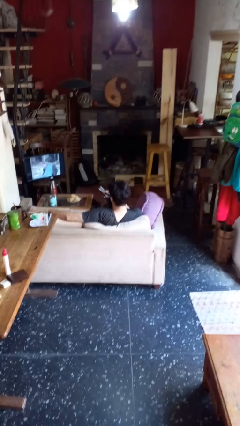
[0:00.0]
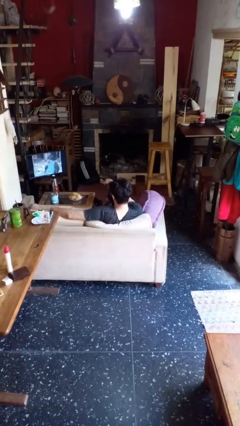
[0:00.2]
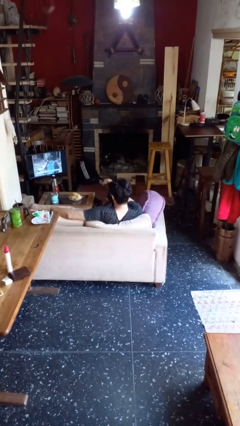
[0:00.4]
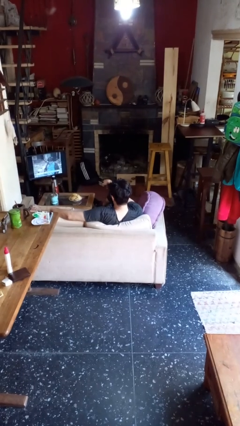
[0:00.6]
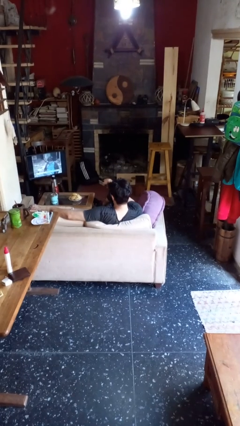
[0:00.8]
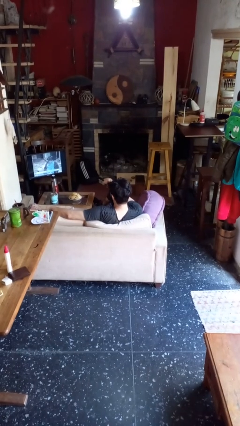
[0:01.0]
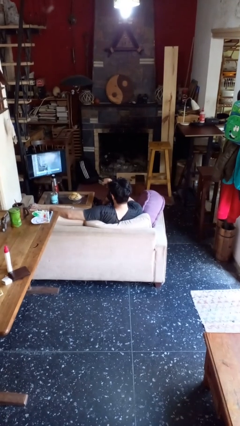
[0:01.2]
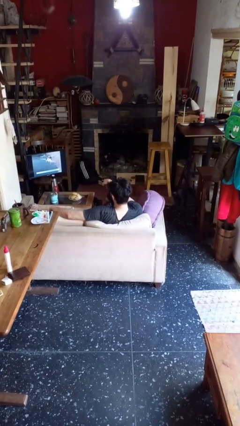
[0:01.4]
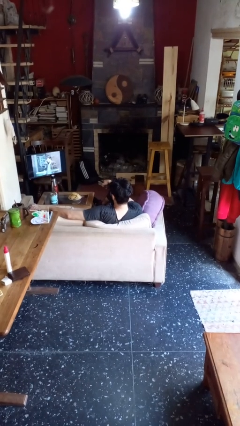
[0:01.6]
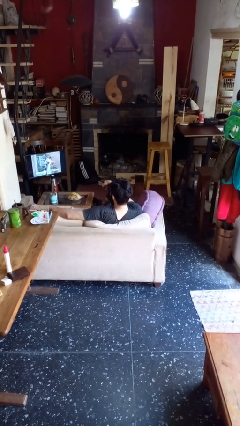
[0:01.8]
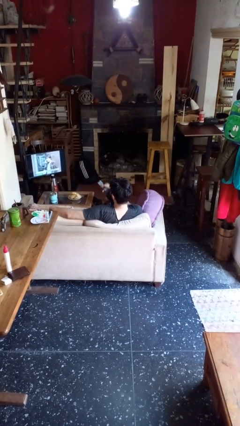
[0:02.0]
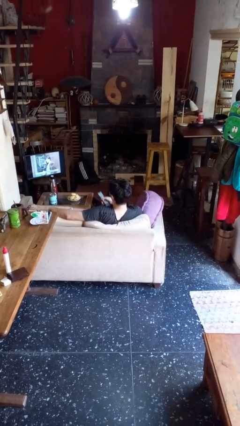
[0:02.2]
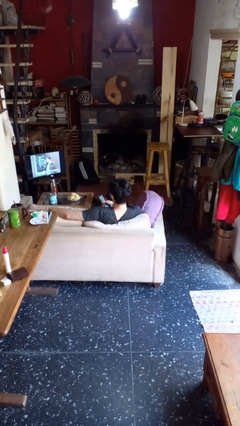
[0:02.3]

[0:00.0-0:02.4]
person uses television remote

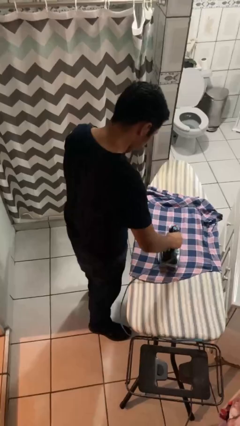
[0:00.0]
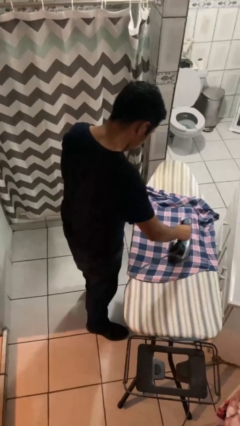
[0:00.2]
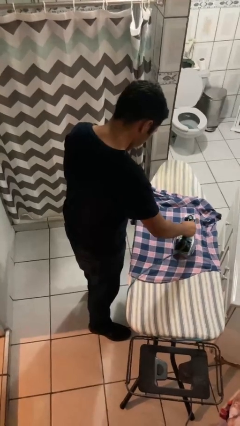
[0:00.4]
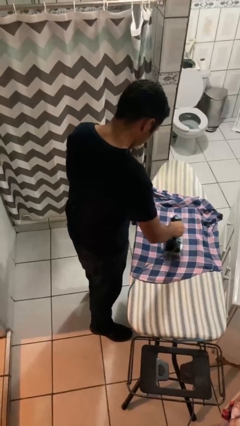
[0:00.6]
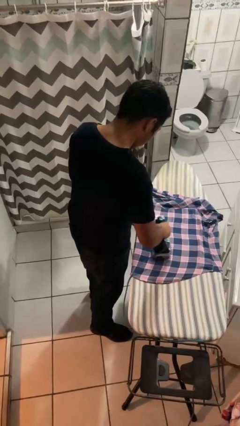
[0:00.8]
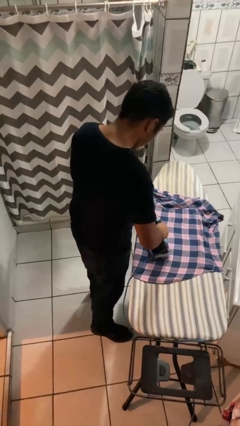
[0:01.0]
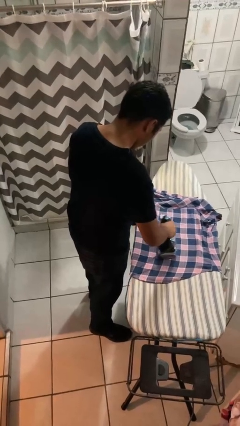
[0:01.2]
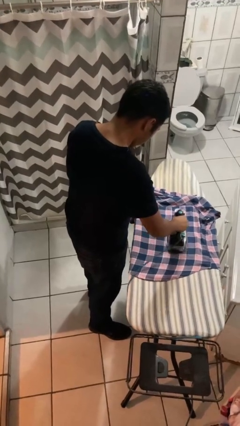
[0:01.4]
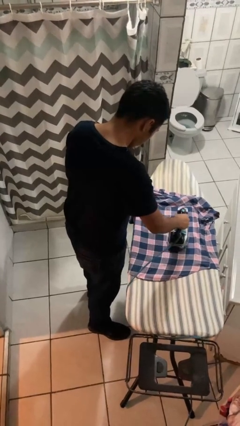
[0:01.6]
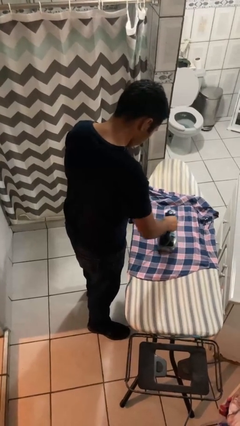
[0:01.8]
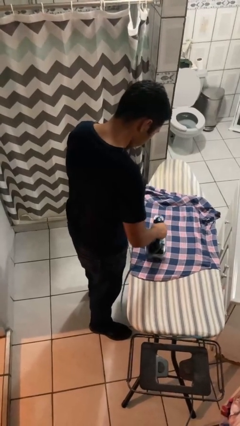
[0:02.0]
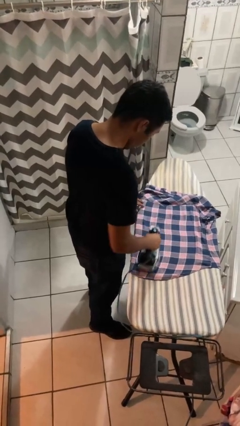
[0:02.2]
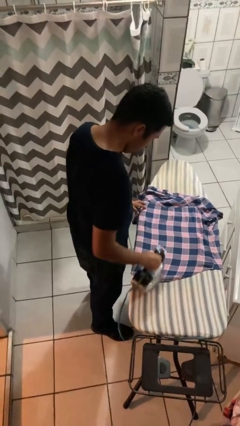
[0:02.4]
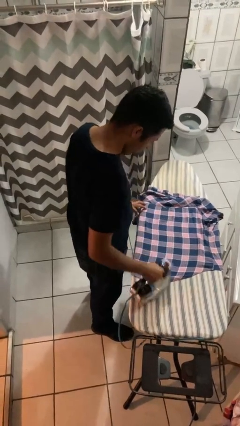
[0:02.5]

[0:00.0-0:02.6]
person irons clothes

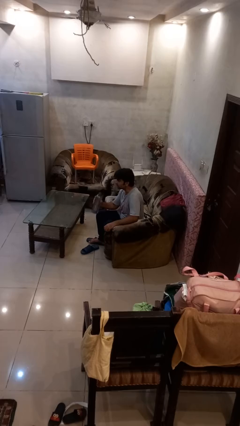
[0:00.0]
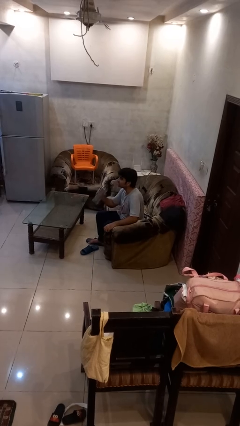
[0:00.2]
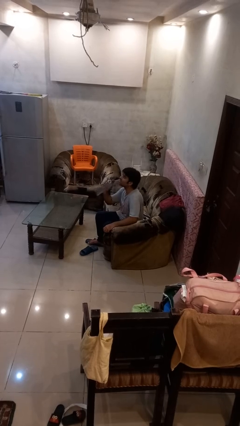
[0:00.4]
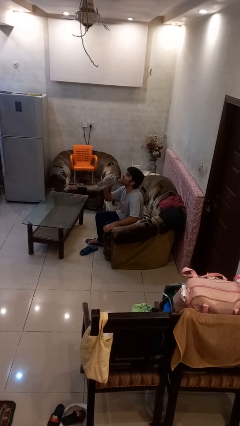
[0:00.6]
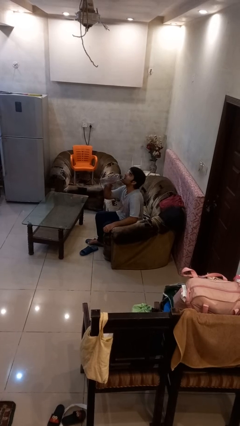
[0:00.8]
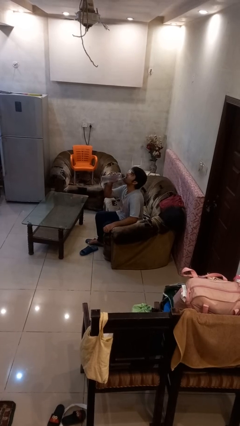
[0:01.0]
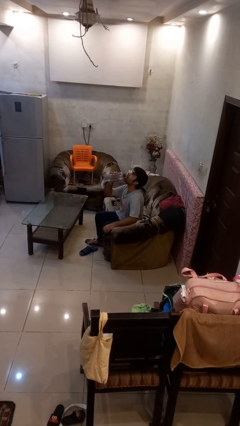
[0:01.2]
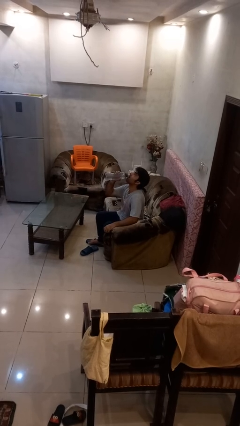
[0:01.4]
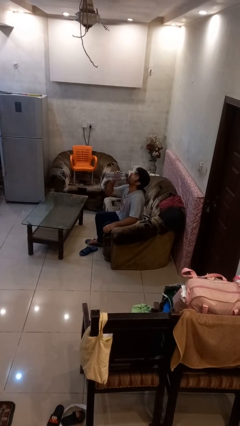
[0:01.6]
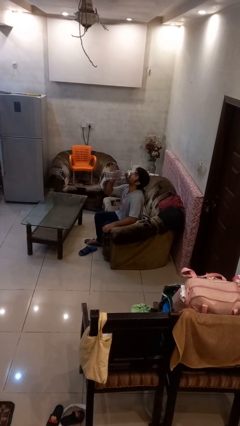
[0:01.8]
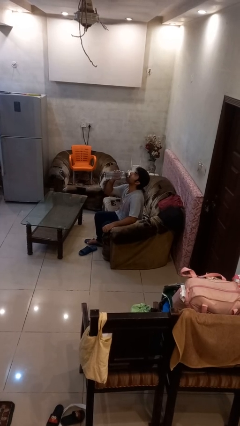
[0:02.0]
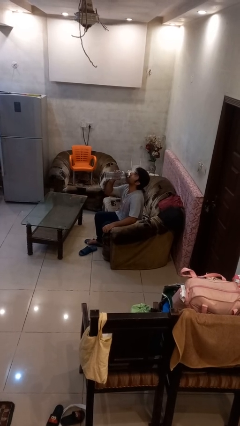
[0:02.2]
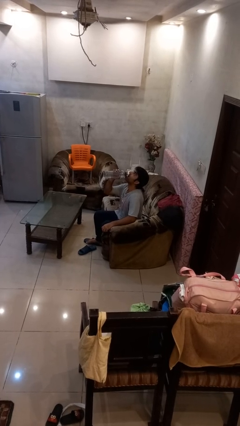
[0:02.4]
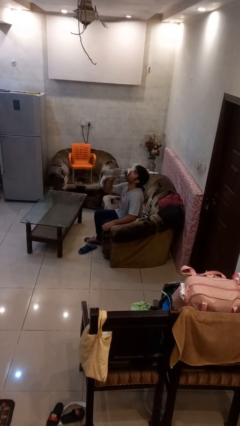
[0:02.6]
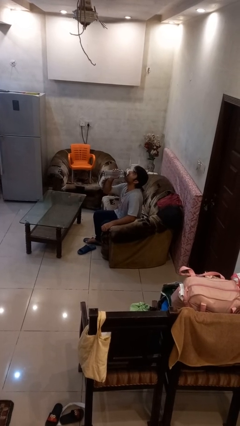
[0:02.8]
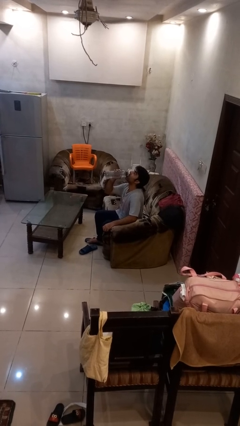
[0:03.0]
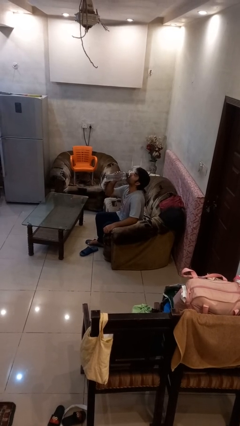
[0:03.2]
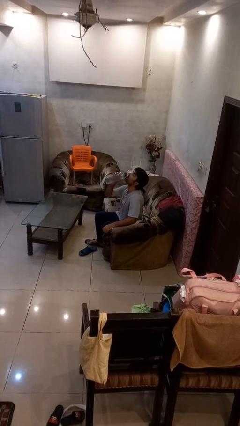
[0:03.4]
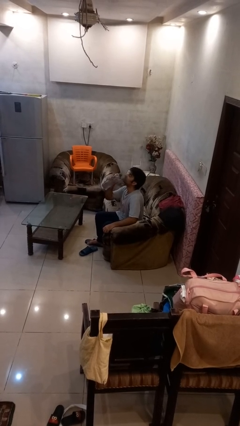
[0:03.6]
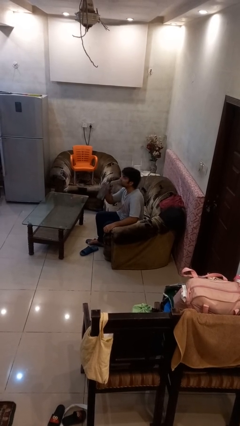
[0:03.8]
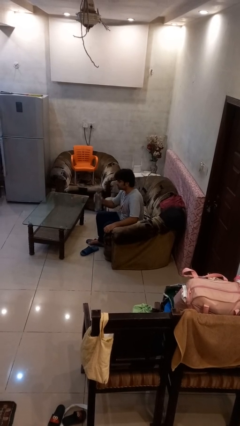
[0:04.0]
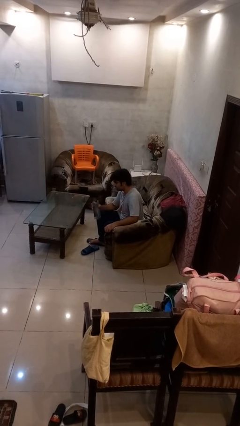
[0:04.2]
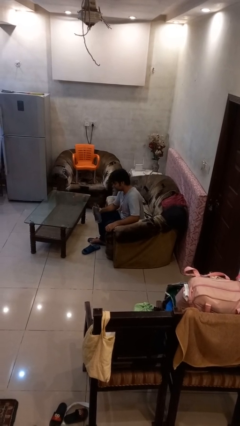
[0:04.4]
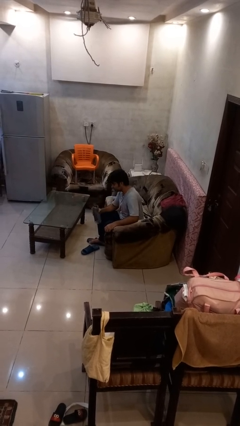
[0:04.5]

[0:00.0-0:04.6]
person drinks from bottle

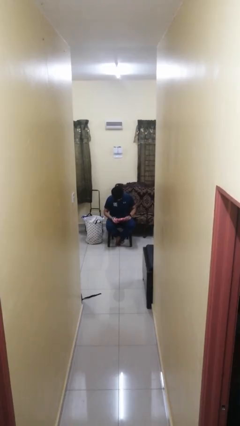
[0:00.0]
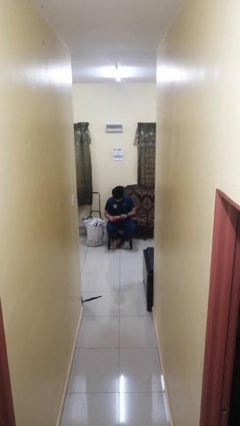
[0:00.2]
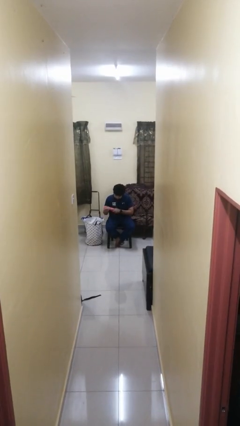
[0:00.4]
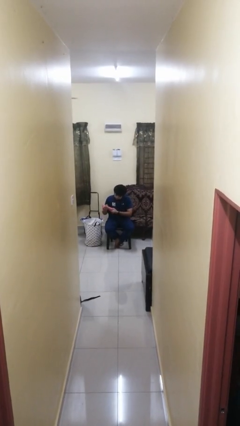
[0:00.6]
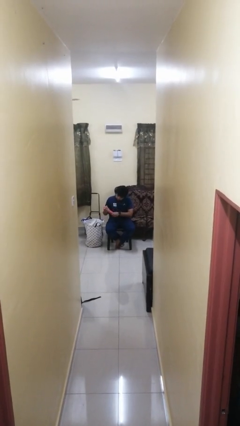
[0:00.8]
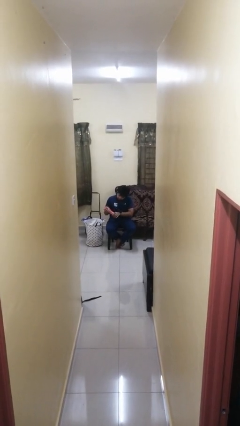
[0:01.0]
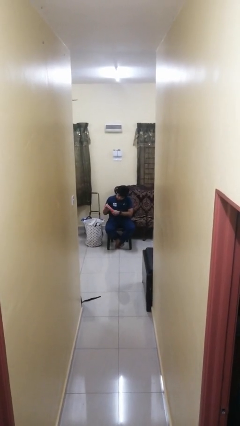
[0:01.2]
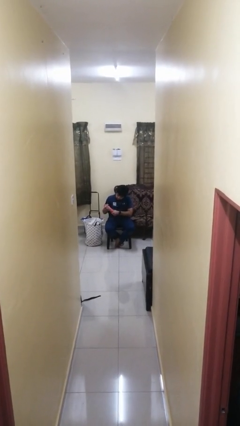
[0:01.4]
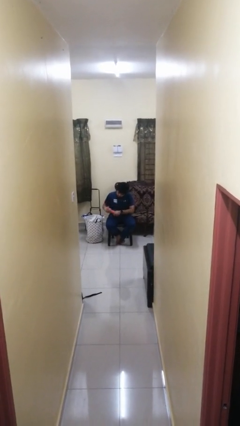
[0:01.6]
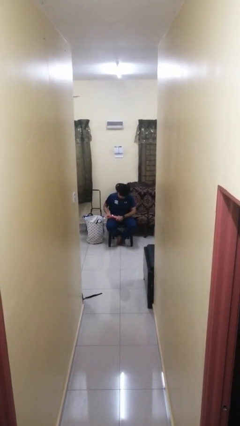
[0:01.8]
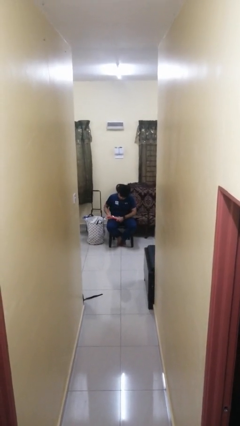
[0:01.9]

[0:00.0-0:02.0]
person squeezes object

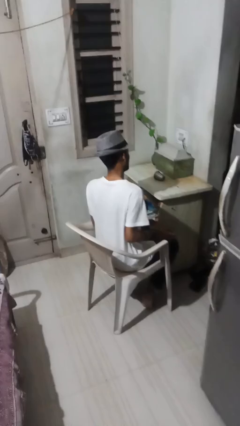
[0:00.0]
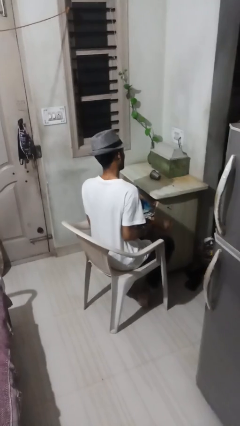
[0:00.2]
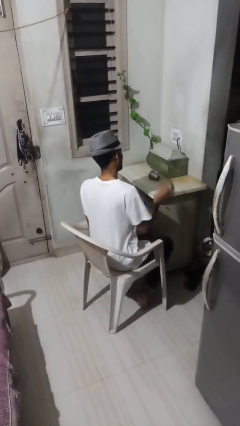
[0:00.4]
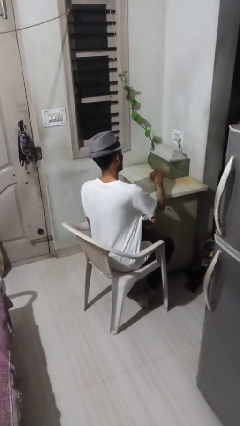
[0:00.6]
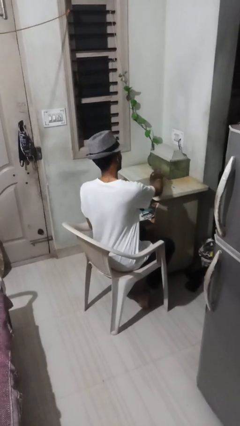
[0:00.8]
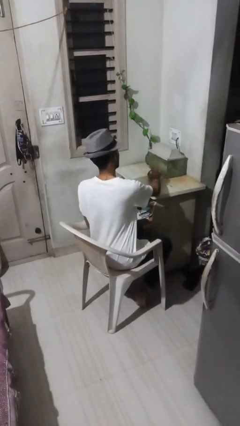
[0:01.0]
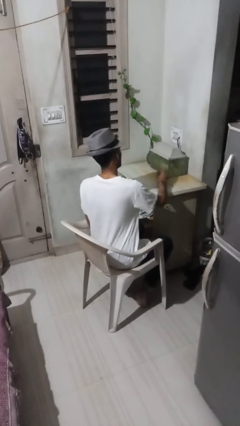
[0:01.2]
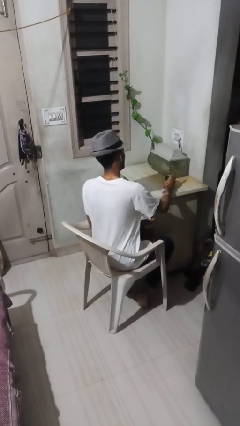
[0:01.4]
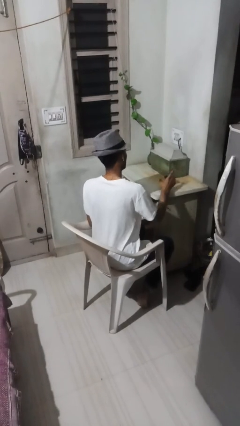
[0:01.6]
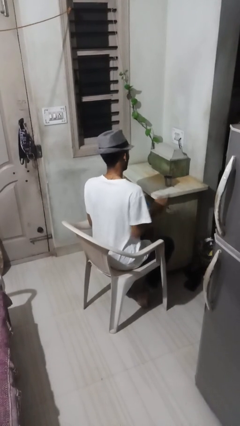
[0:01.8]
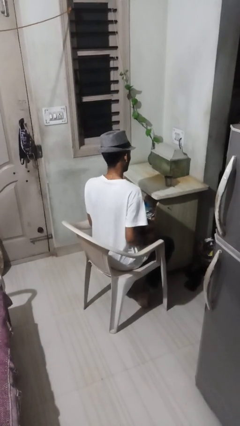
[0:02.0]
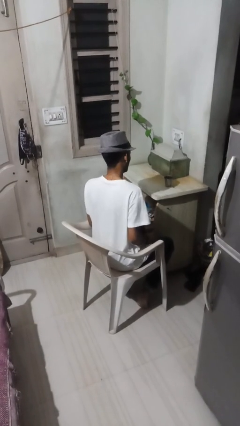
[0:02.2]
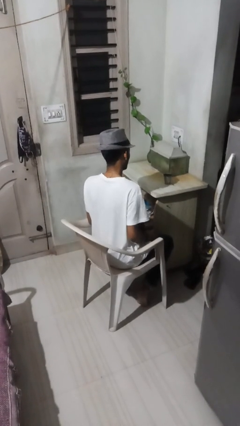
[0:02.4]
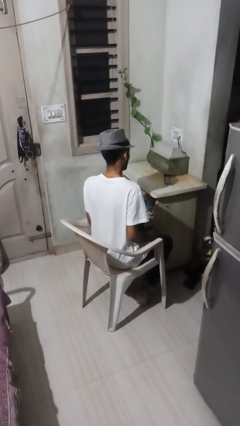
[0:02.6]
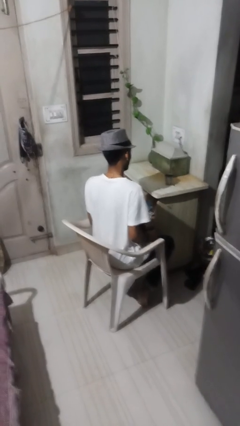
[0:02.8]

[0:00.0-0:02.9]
person sets upright glass

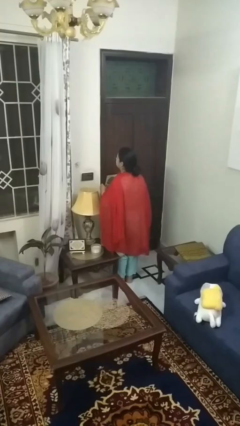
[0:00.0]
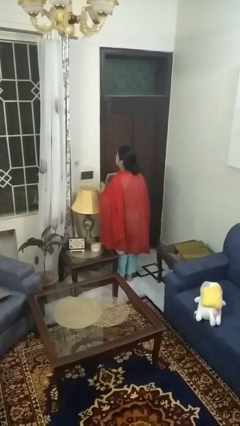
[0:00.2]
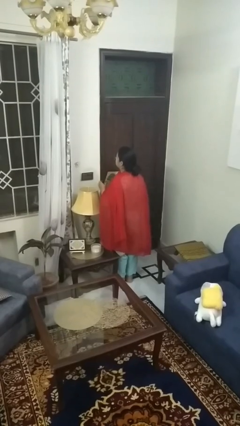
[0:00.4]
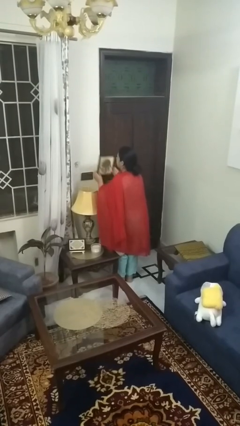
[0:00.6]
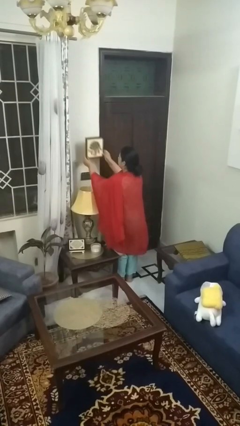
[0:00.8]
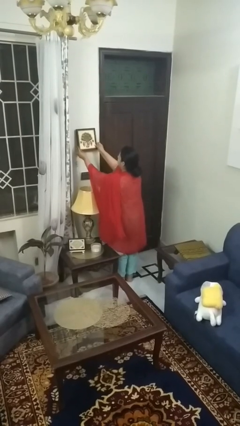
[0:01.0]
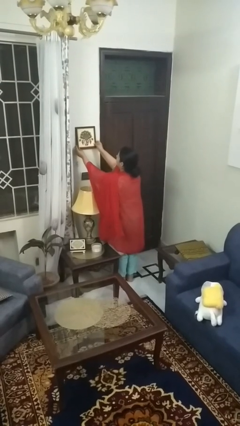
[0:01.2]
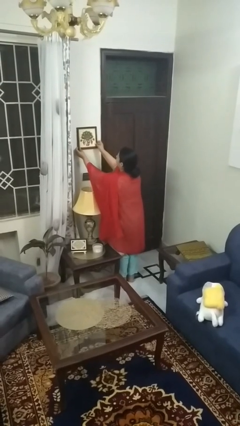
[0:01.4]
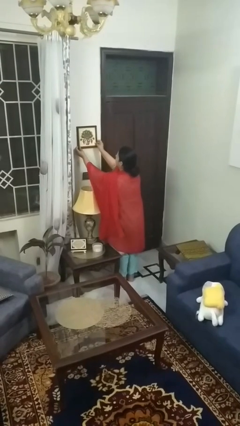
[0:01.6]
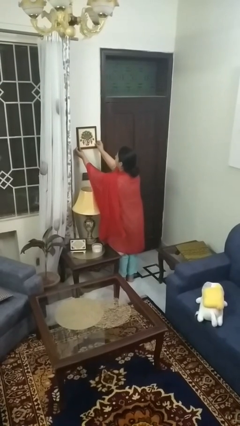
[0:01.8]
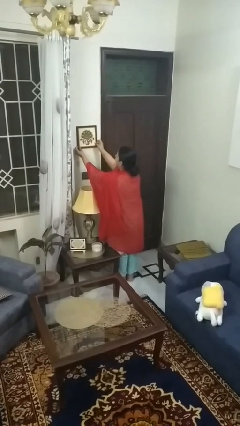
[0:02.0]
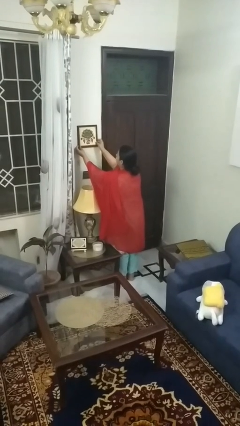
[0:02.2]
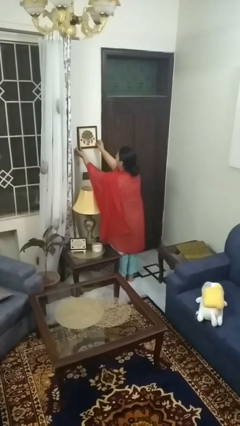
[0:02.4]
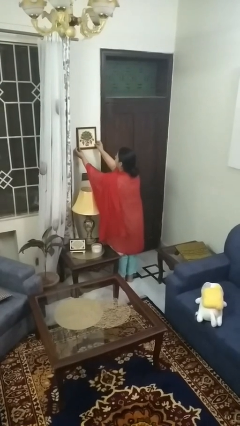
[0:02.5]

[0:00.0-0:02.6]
person puts up picture frame

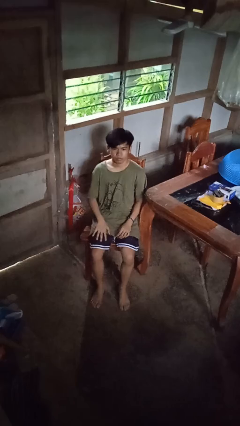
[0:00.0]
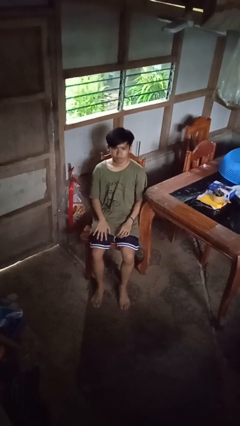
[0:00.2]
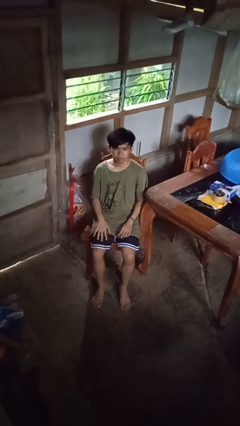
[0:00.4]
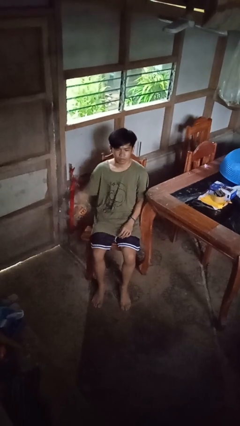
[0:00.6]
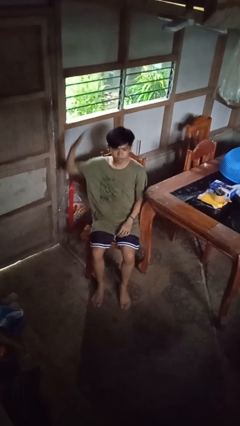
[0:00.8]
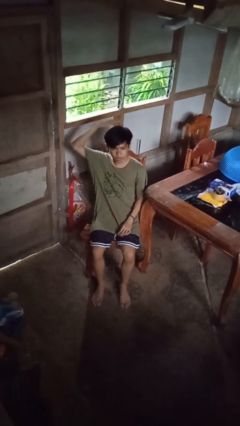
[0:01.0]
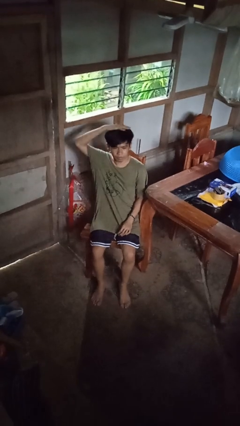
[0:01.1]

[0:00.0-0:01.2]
person pats head
